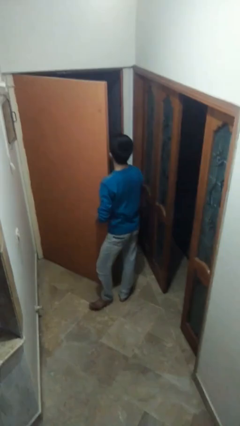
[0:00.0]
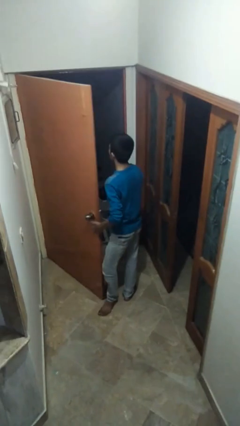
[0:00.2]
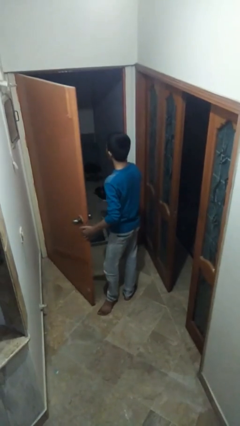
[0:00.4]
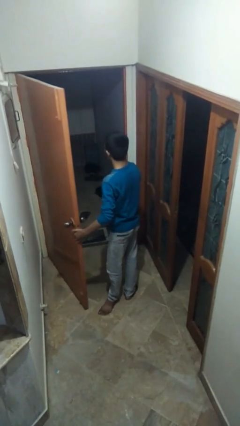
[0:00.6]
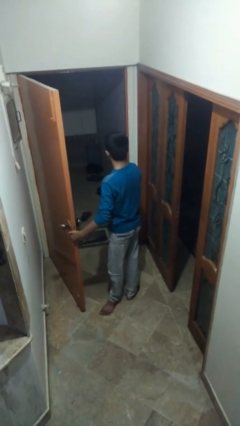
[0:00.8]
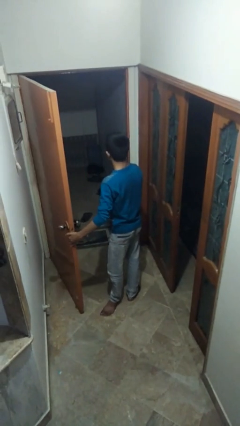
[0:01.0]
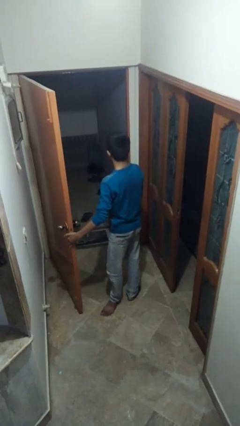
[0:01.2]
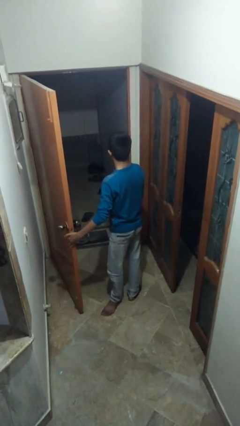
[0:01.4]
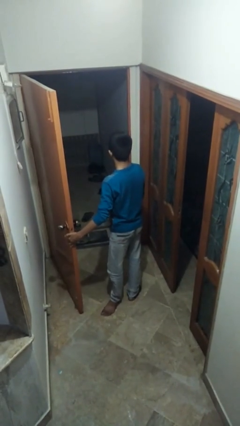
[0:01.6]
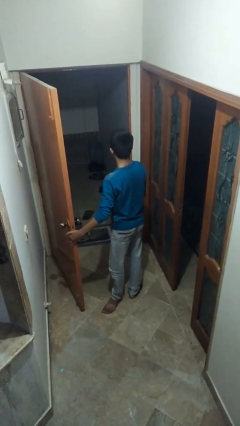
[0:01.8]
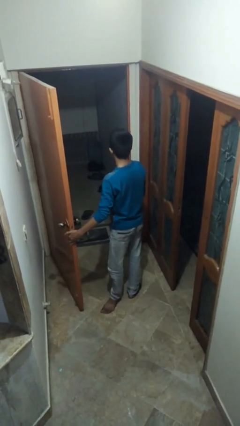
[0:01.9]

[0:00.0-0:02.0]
person opens facility door

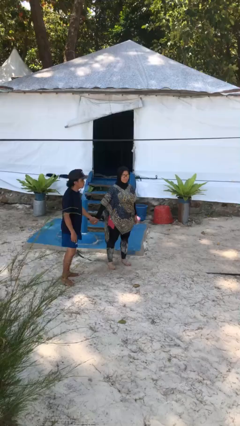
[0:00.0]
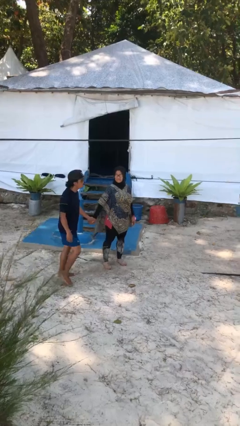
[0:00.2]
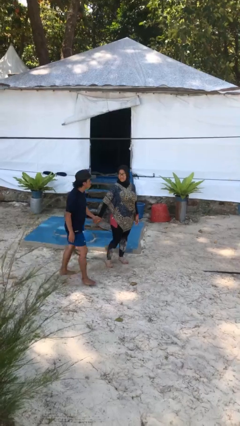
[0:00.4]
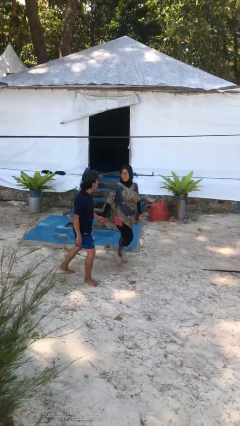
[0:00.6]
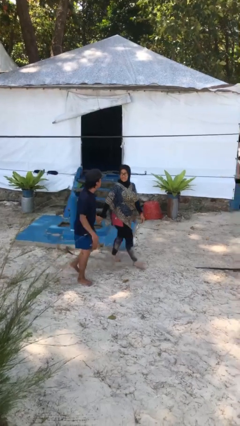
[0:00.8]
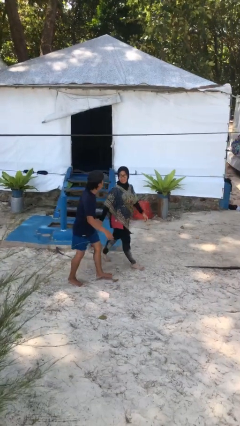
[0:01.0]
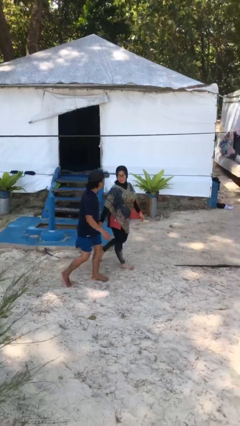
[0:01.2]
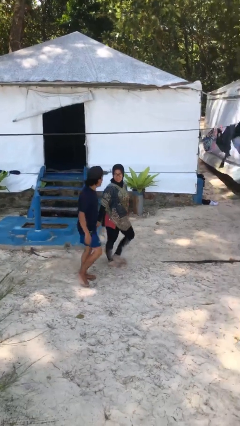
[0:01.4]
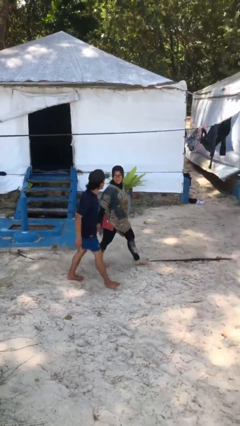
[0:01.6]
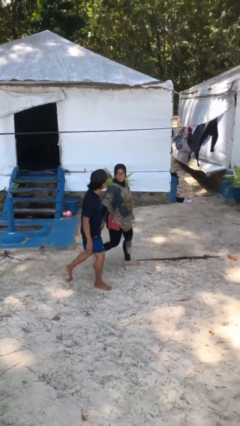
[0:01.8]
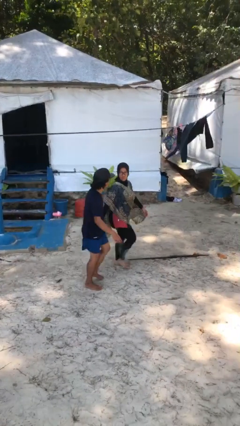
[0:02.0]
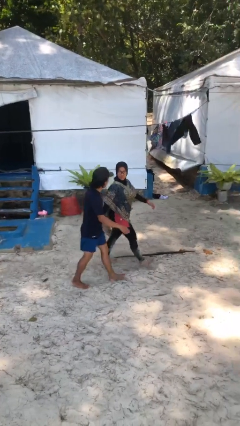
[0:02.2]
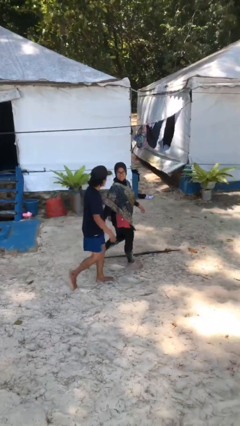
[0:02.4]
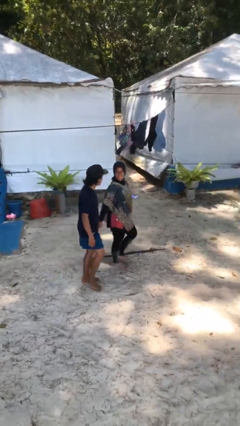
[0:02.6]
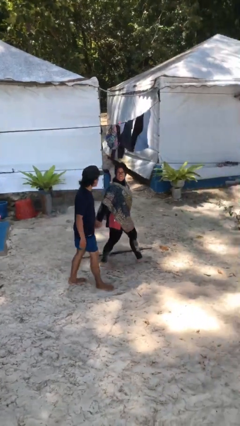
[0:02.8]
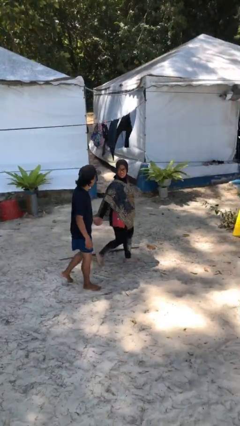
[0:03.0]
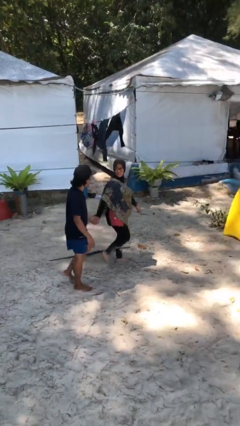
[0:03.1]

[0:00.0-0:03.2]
person holds hand

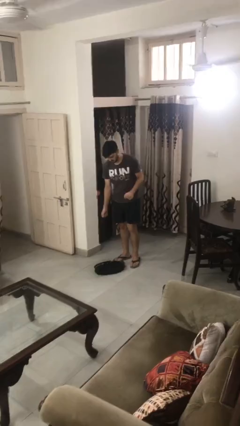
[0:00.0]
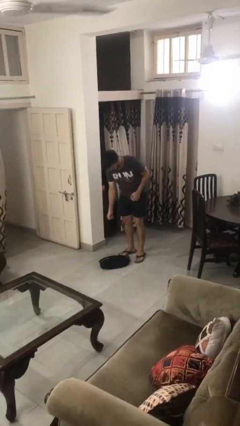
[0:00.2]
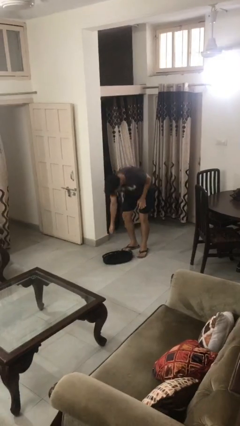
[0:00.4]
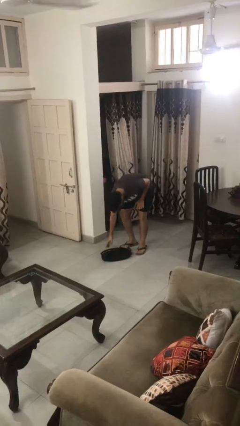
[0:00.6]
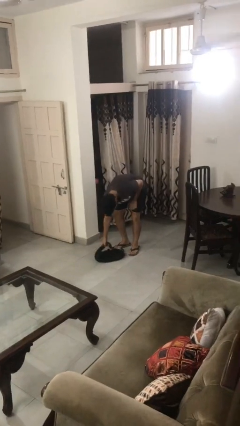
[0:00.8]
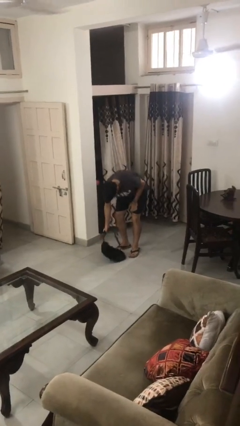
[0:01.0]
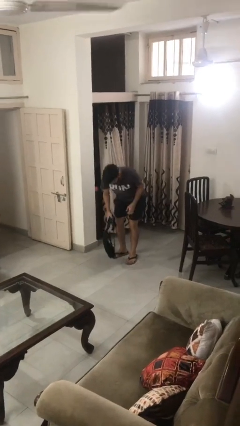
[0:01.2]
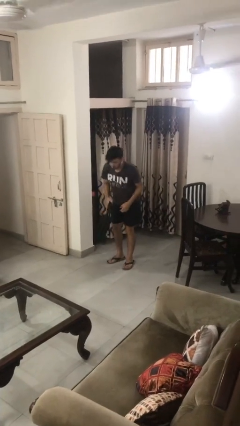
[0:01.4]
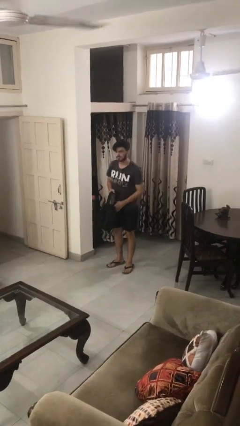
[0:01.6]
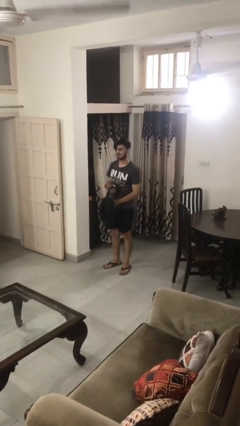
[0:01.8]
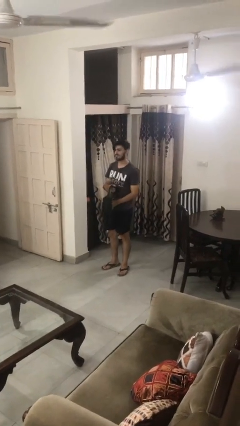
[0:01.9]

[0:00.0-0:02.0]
person picks up object from floor

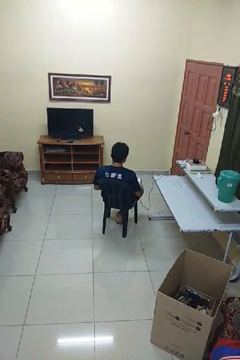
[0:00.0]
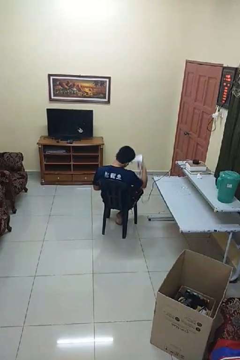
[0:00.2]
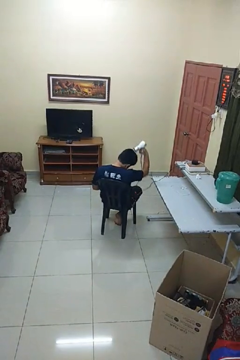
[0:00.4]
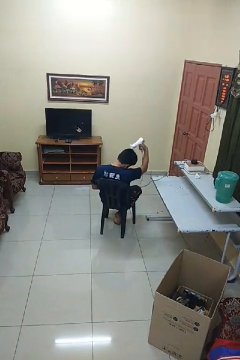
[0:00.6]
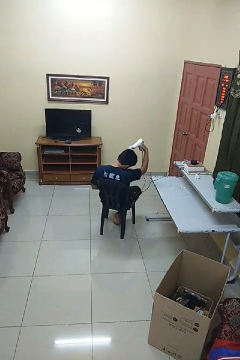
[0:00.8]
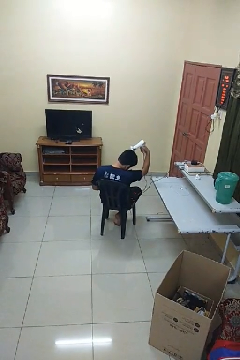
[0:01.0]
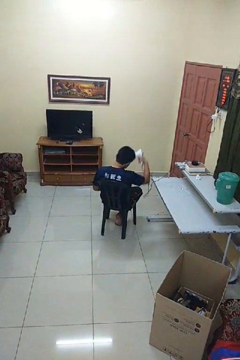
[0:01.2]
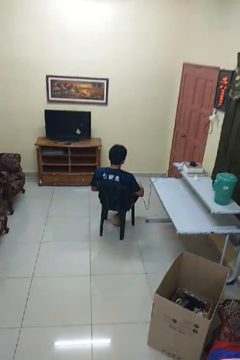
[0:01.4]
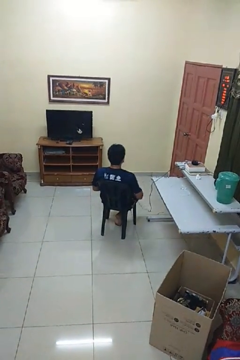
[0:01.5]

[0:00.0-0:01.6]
person dries hair with hairdryer

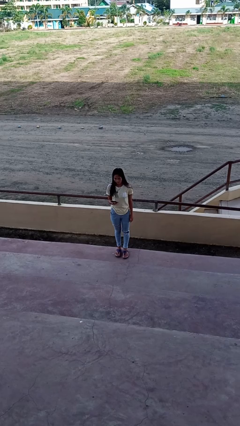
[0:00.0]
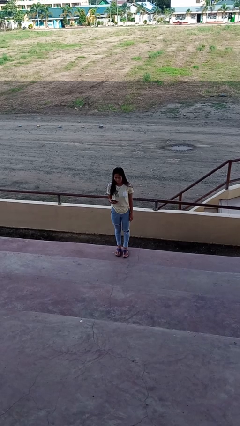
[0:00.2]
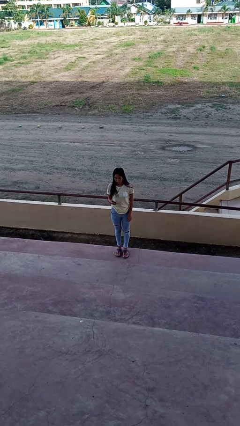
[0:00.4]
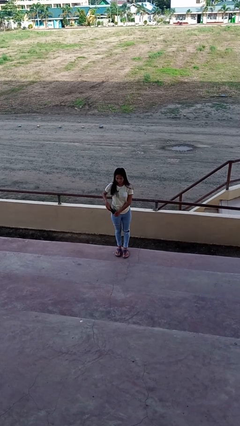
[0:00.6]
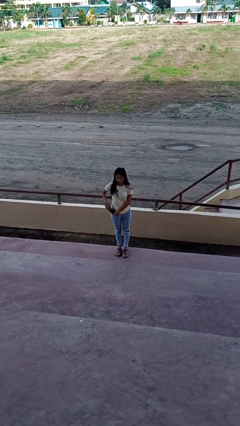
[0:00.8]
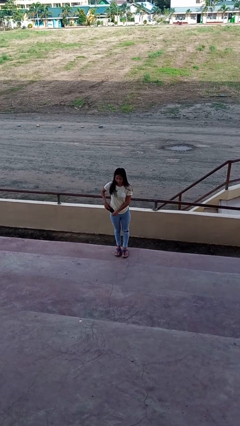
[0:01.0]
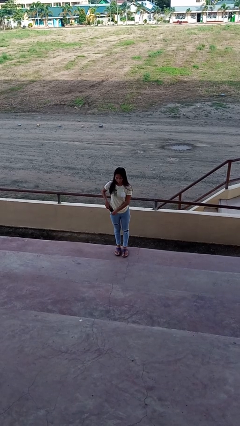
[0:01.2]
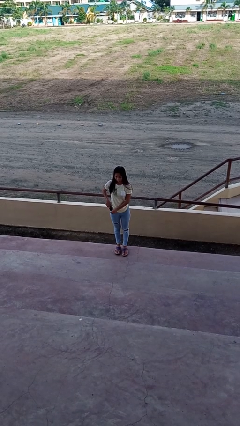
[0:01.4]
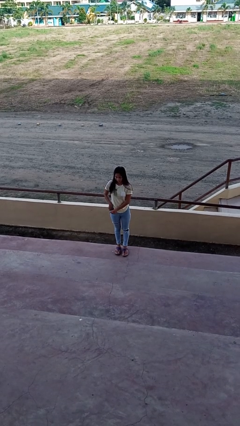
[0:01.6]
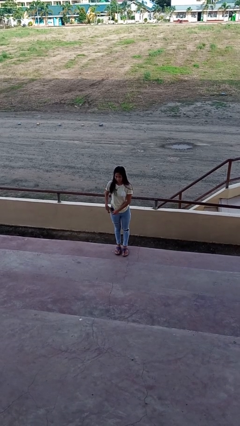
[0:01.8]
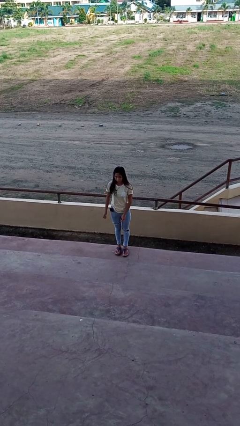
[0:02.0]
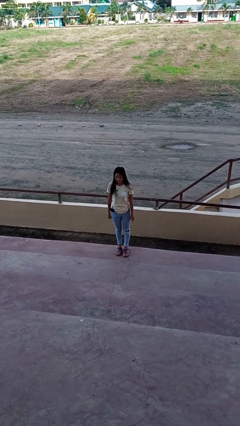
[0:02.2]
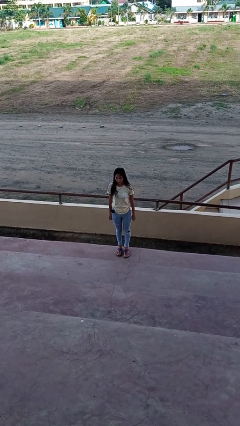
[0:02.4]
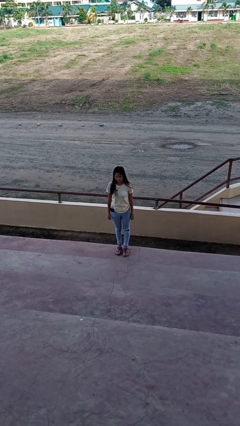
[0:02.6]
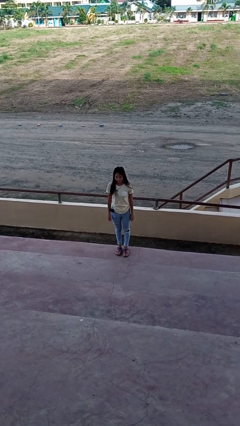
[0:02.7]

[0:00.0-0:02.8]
person puts phone into pocket

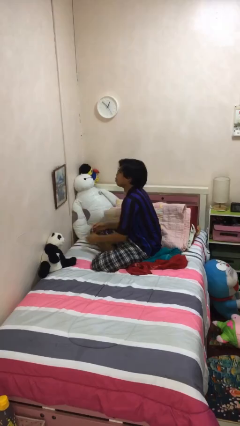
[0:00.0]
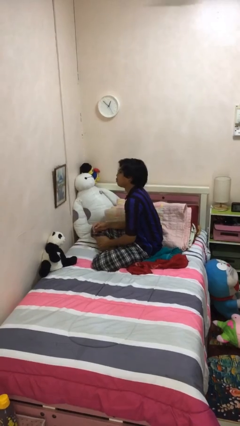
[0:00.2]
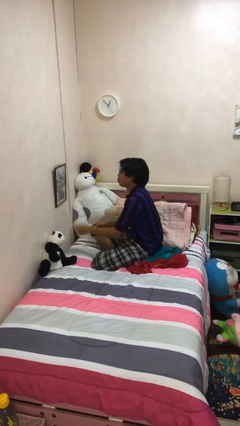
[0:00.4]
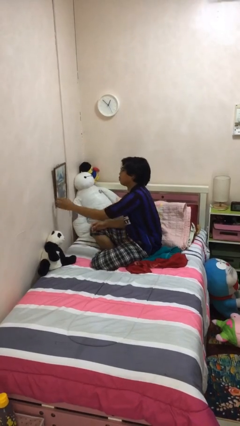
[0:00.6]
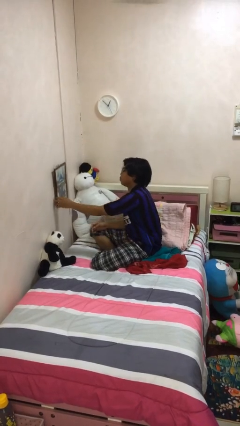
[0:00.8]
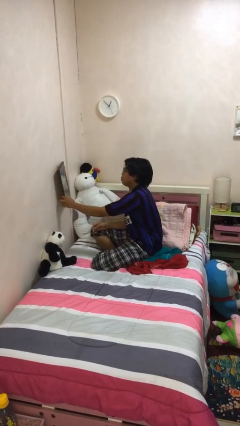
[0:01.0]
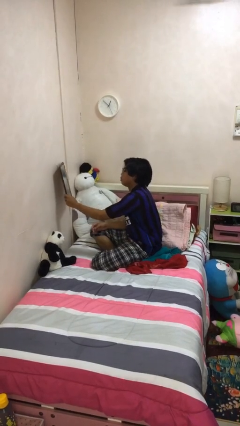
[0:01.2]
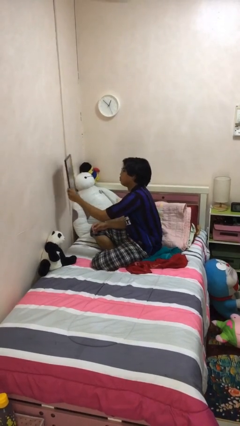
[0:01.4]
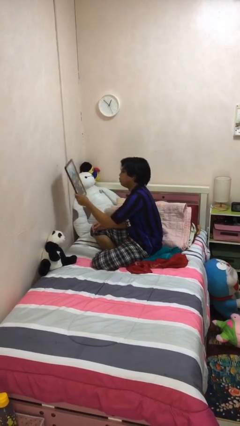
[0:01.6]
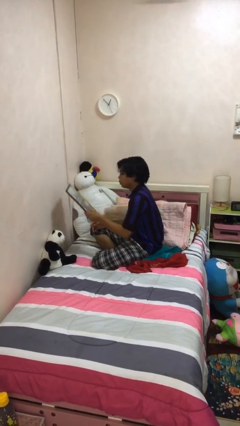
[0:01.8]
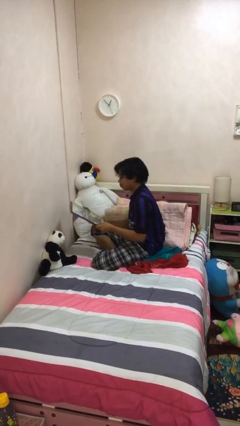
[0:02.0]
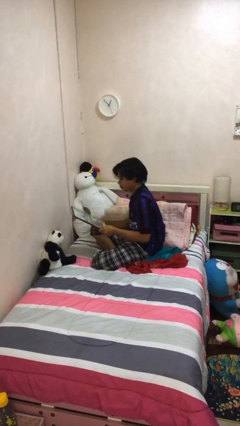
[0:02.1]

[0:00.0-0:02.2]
person takes down picture frame

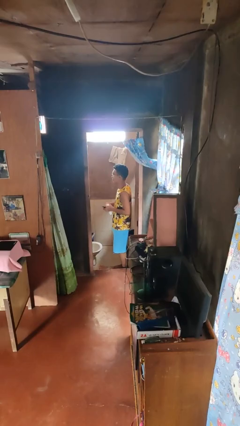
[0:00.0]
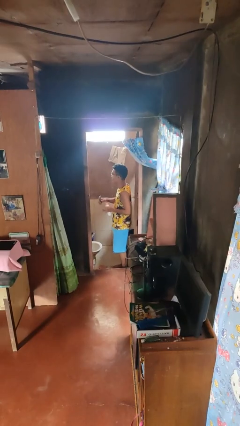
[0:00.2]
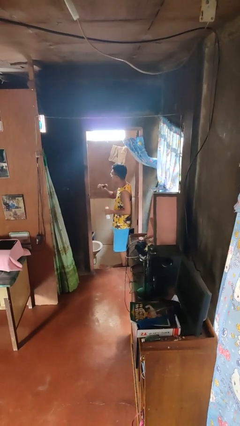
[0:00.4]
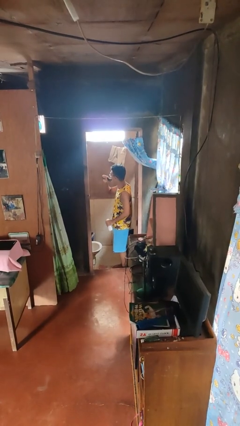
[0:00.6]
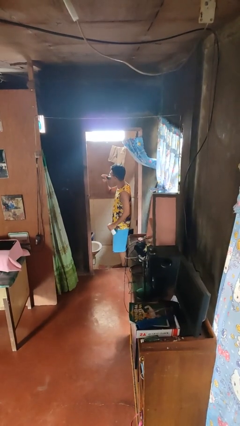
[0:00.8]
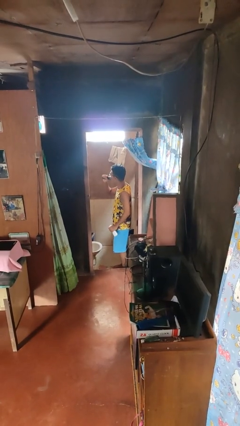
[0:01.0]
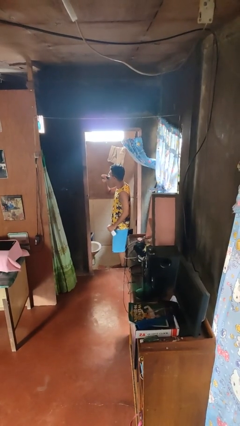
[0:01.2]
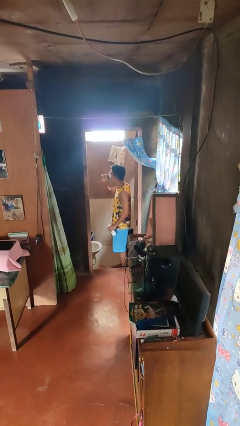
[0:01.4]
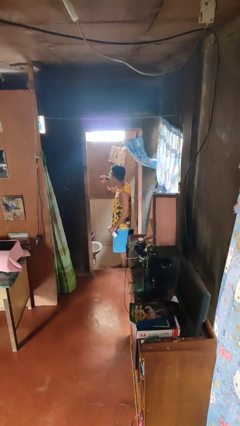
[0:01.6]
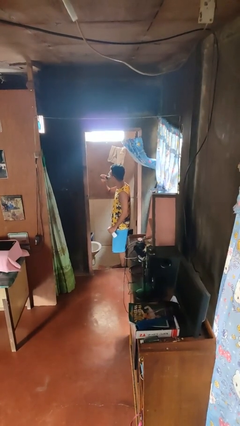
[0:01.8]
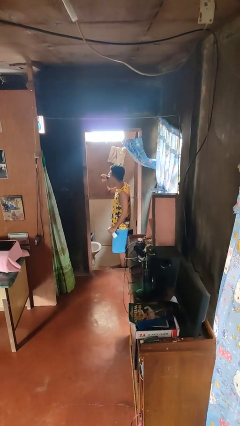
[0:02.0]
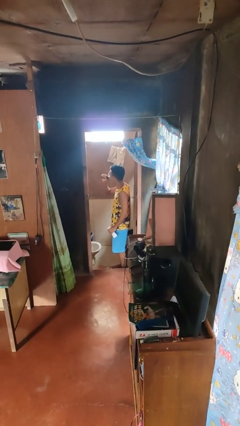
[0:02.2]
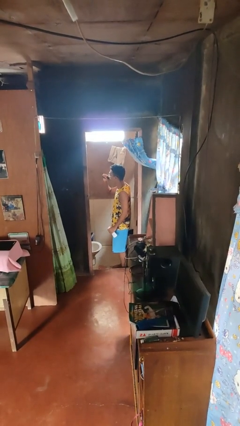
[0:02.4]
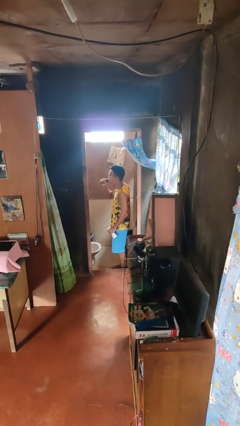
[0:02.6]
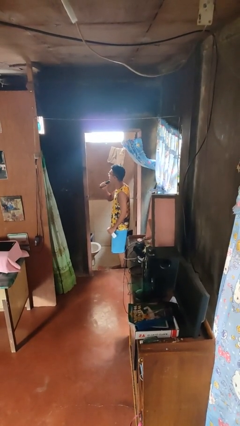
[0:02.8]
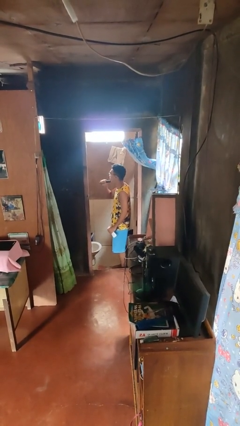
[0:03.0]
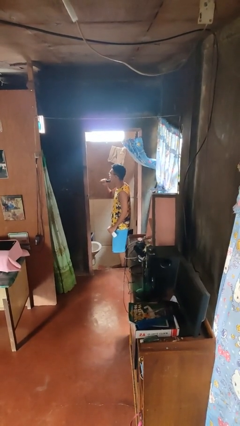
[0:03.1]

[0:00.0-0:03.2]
person shaves face

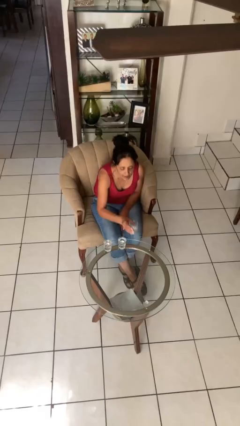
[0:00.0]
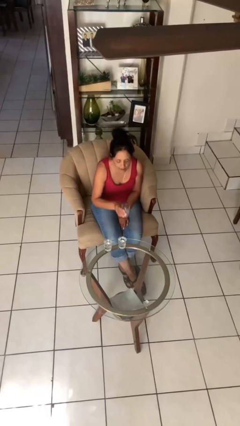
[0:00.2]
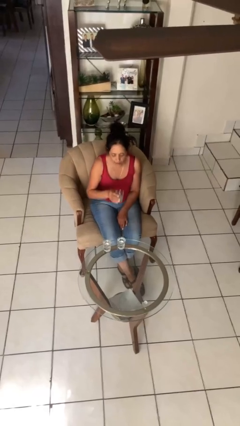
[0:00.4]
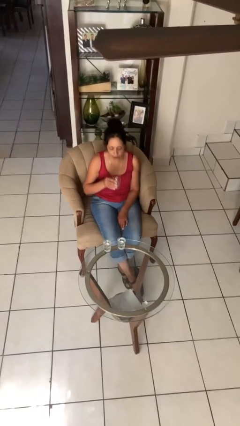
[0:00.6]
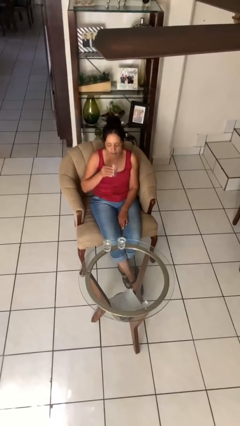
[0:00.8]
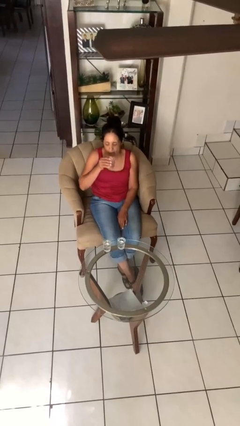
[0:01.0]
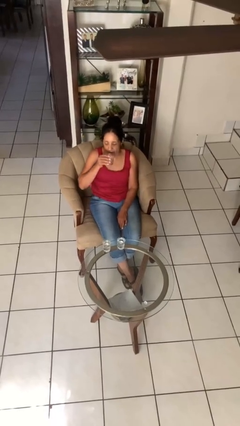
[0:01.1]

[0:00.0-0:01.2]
person picks up object from table
